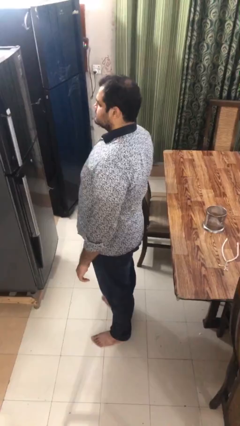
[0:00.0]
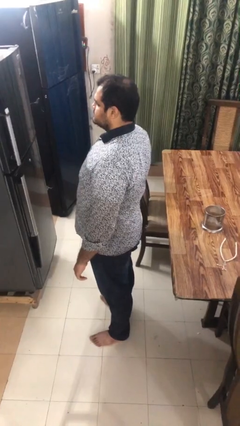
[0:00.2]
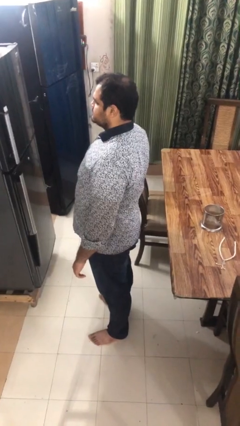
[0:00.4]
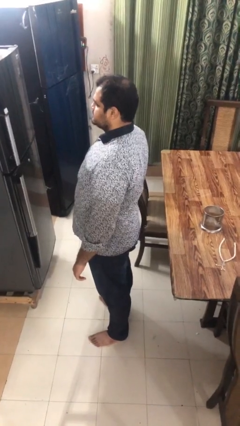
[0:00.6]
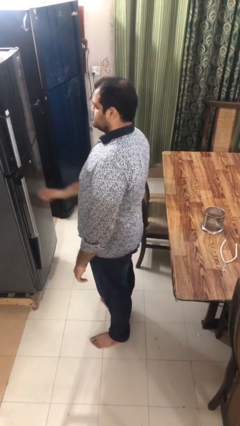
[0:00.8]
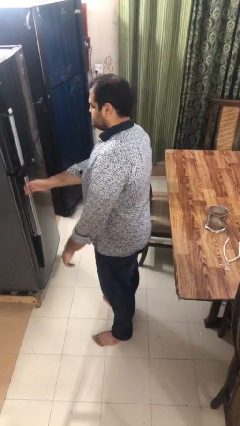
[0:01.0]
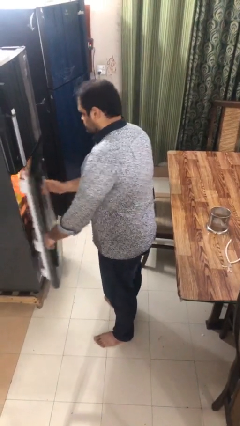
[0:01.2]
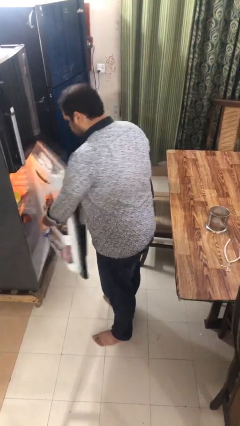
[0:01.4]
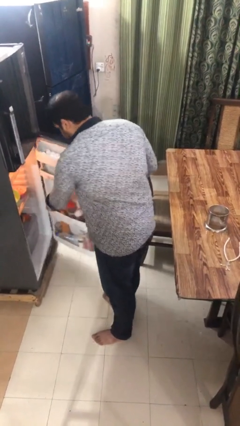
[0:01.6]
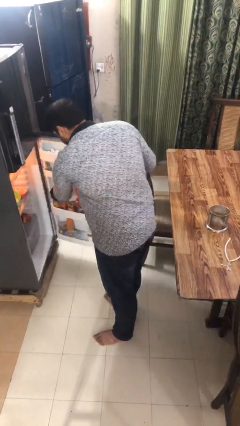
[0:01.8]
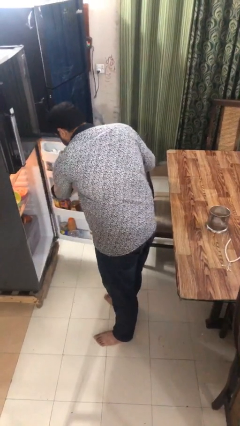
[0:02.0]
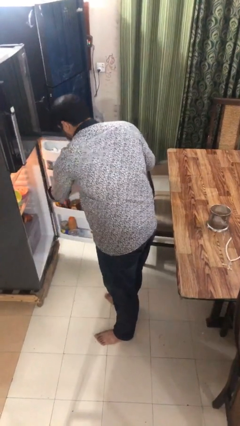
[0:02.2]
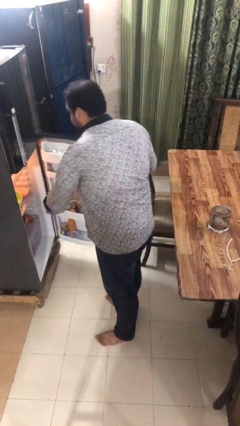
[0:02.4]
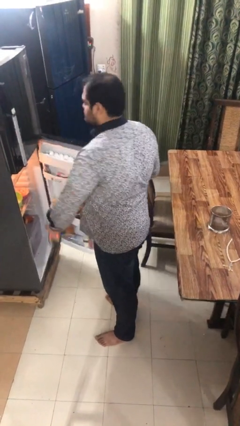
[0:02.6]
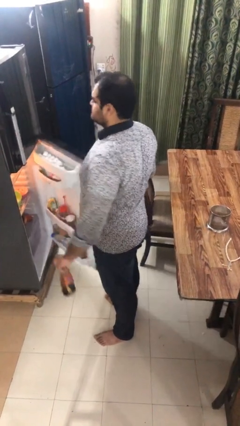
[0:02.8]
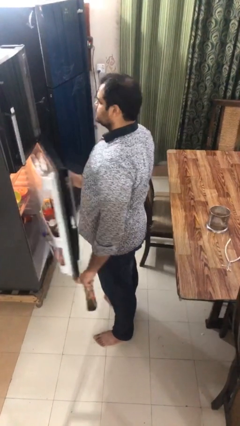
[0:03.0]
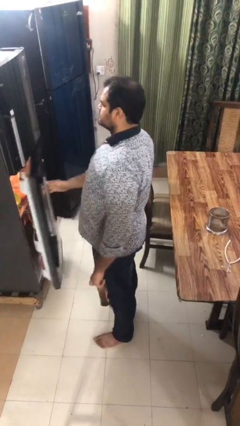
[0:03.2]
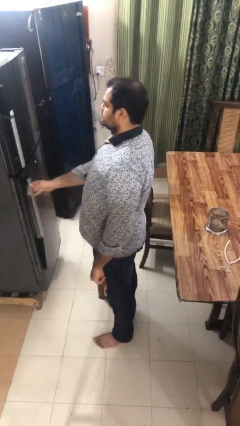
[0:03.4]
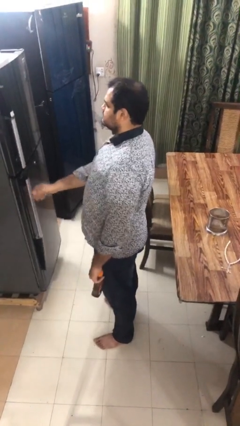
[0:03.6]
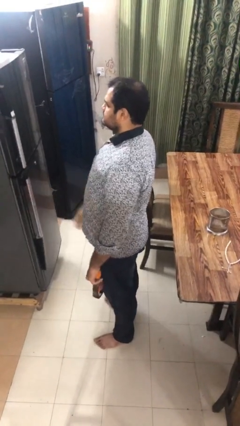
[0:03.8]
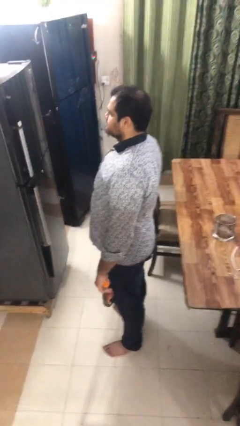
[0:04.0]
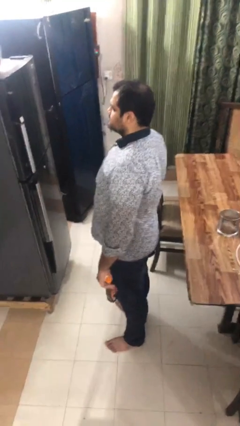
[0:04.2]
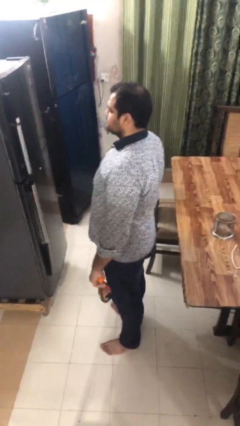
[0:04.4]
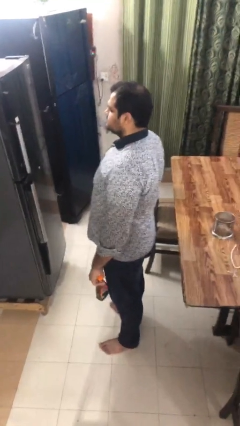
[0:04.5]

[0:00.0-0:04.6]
person takes object from refrigerator

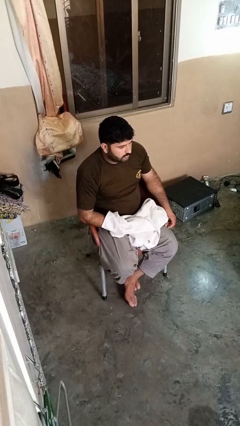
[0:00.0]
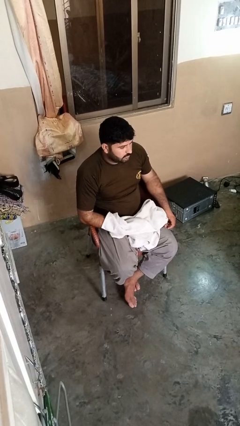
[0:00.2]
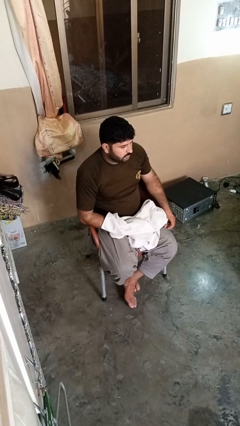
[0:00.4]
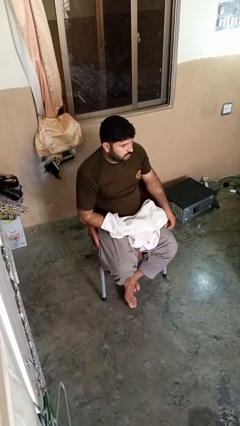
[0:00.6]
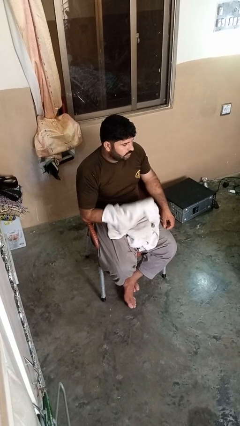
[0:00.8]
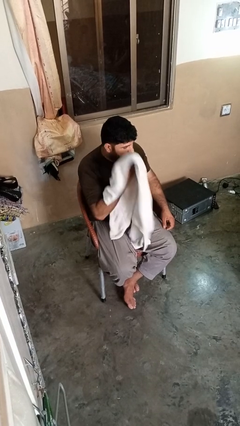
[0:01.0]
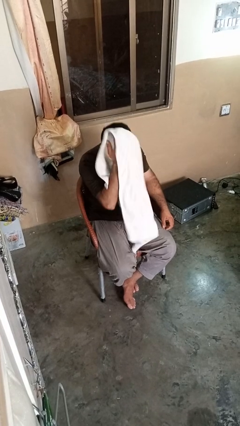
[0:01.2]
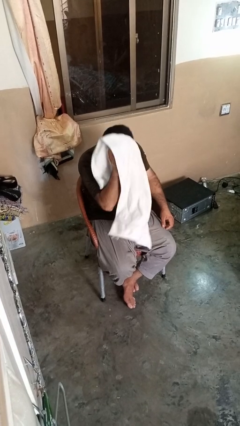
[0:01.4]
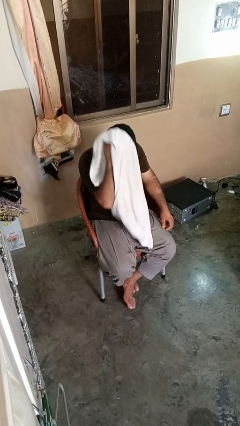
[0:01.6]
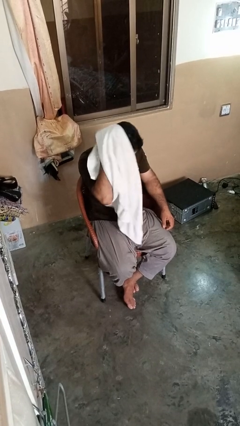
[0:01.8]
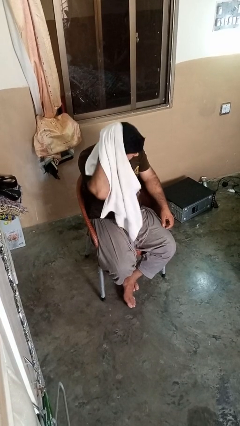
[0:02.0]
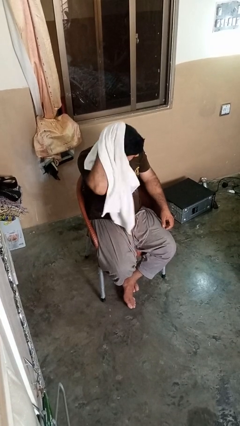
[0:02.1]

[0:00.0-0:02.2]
person dries hair with towel

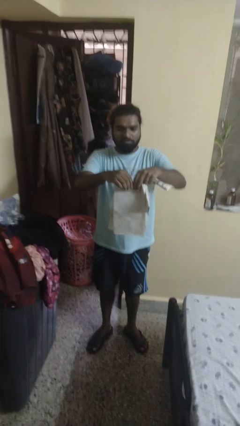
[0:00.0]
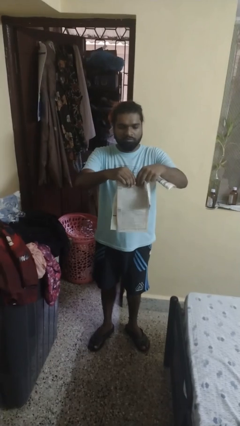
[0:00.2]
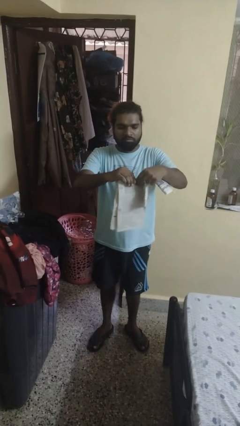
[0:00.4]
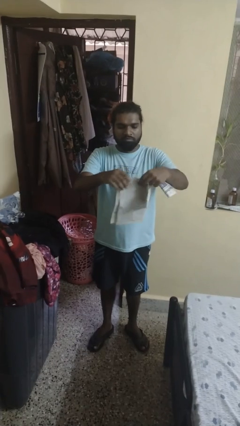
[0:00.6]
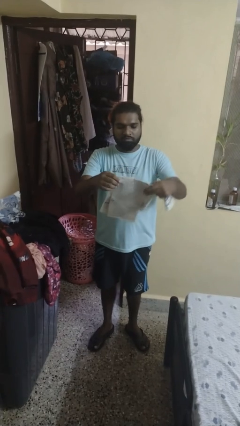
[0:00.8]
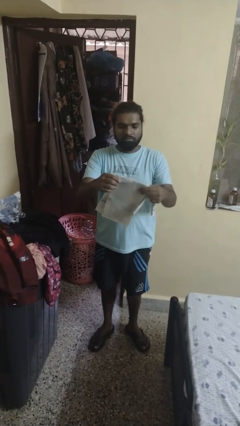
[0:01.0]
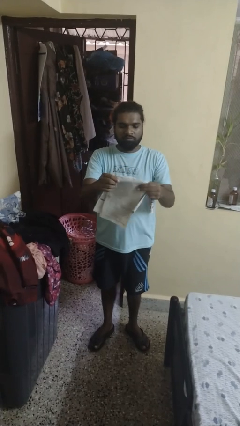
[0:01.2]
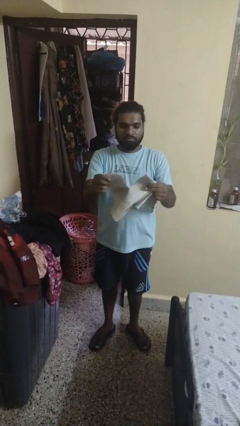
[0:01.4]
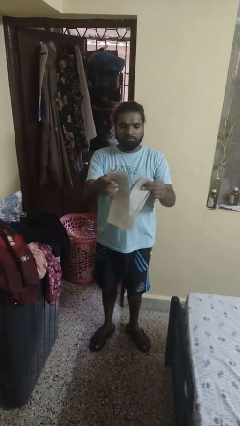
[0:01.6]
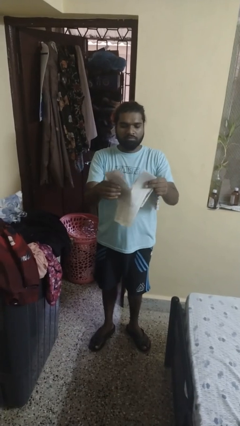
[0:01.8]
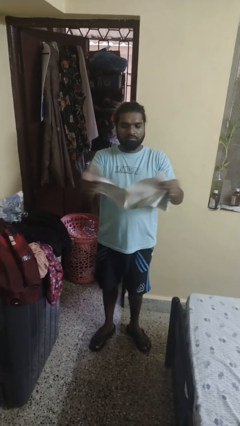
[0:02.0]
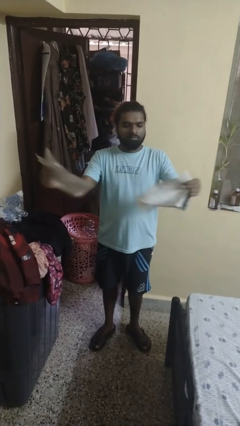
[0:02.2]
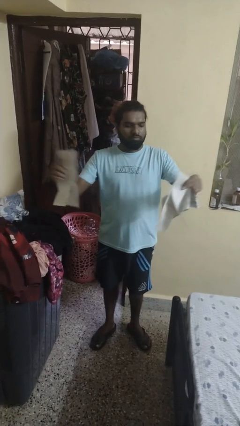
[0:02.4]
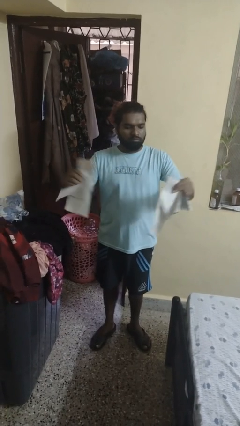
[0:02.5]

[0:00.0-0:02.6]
person tears paper
